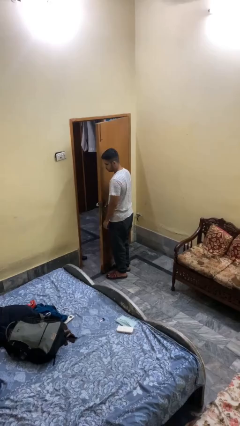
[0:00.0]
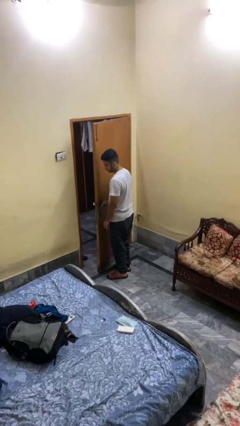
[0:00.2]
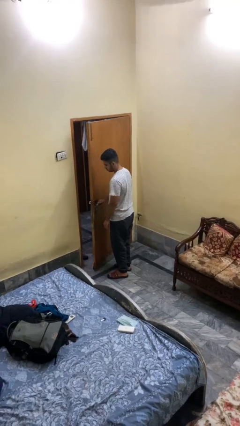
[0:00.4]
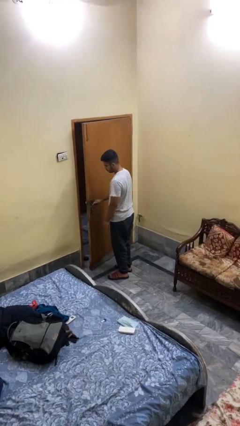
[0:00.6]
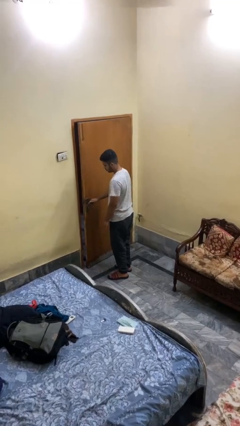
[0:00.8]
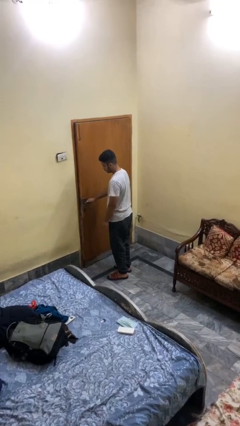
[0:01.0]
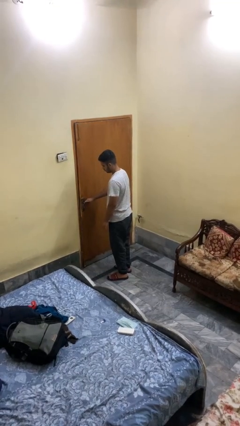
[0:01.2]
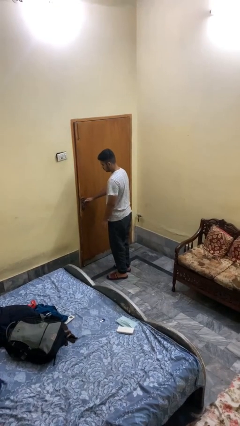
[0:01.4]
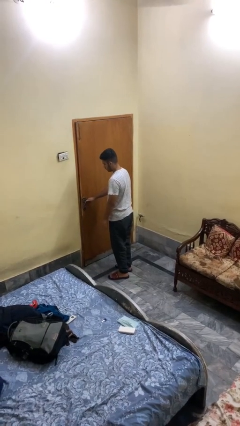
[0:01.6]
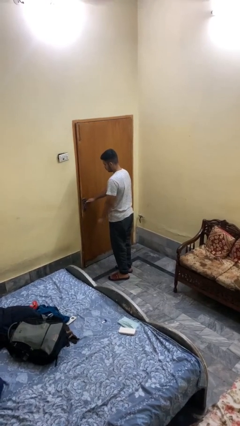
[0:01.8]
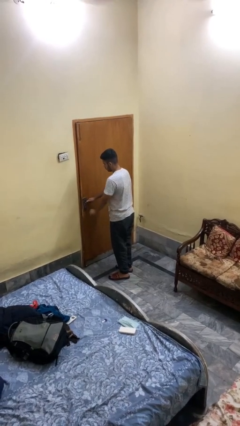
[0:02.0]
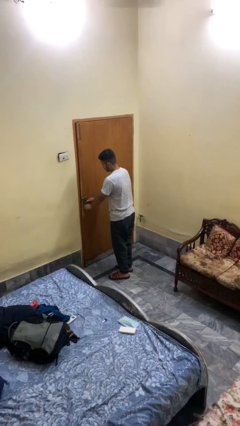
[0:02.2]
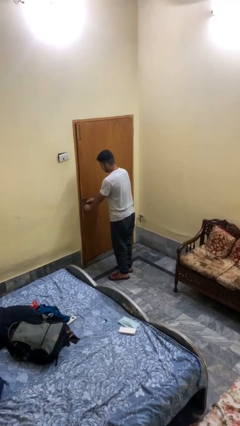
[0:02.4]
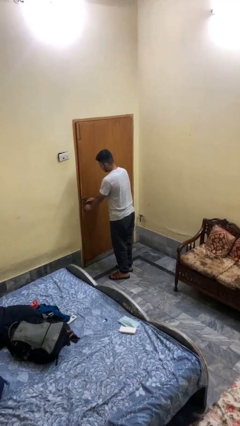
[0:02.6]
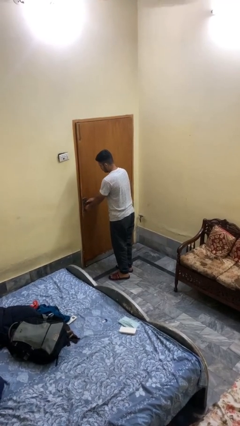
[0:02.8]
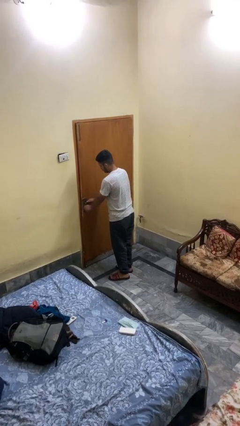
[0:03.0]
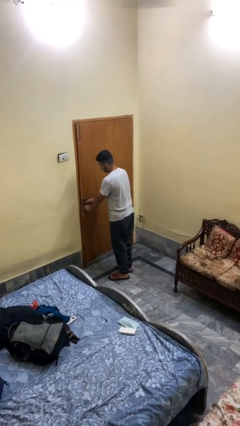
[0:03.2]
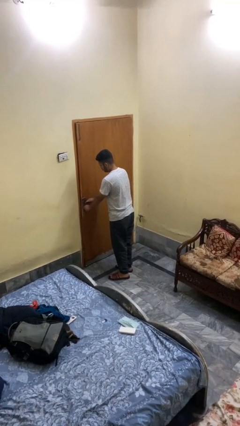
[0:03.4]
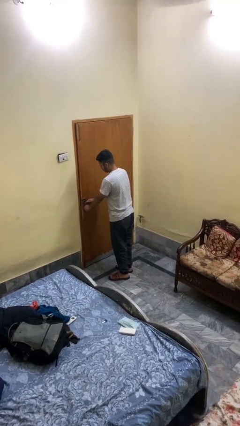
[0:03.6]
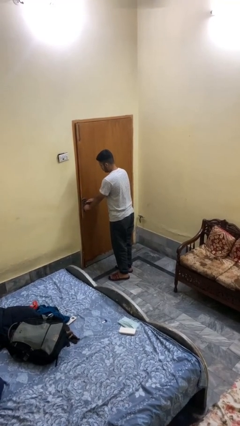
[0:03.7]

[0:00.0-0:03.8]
person closes facility door

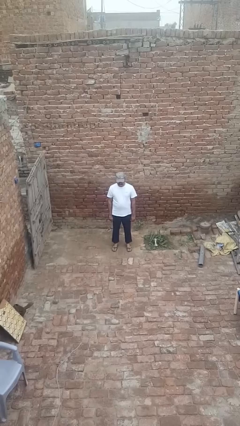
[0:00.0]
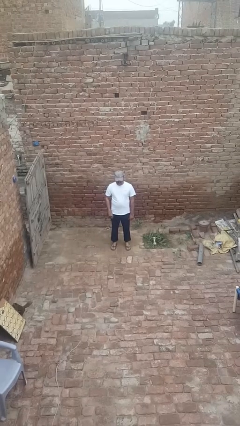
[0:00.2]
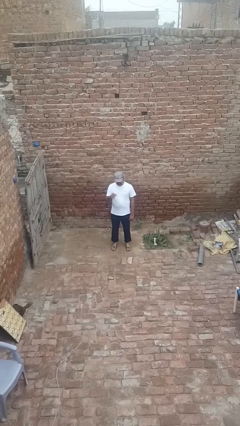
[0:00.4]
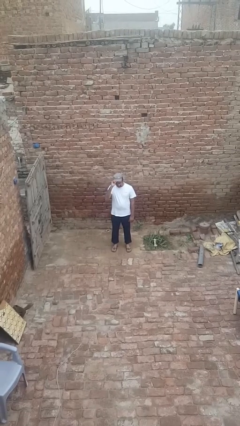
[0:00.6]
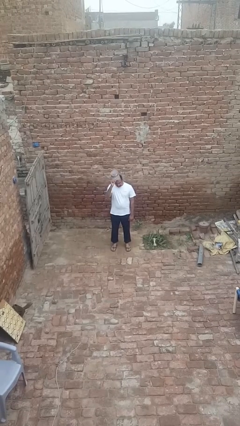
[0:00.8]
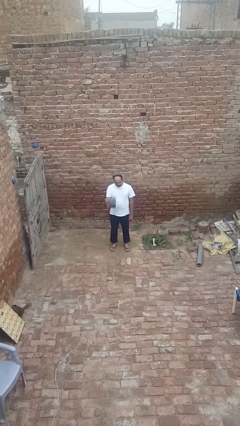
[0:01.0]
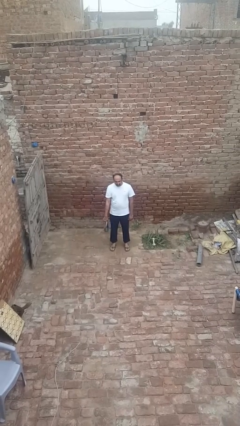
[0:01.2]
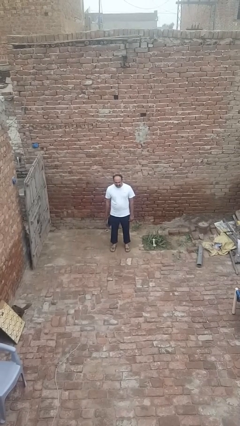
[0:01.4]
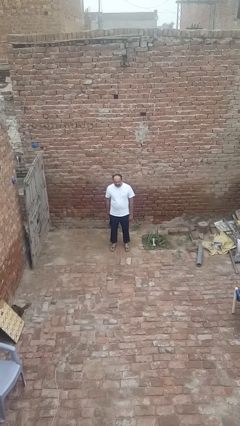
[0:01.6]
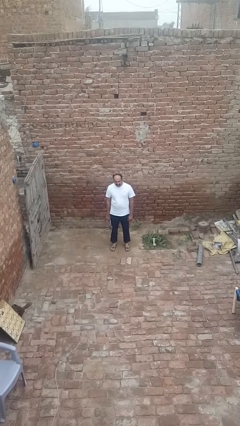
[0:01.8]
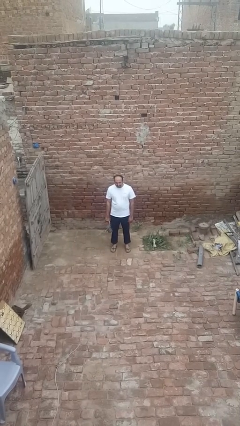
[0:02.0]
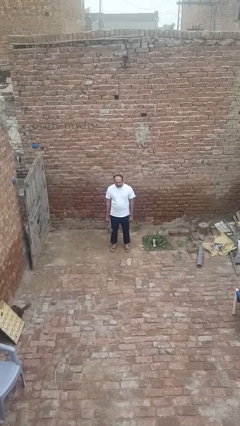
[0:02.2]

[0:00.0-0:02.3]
person takes off hat

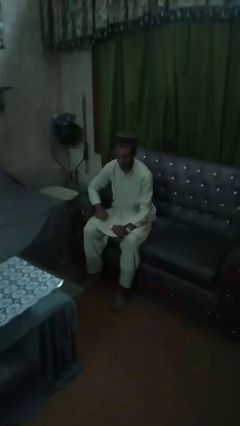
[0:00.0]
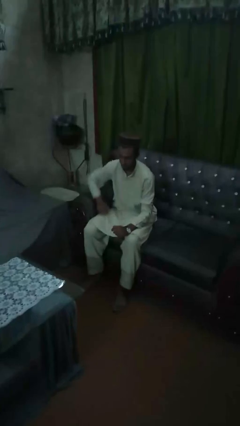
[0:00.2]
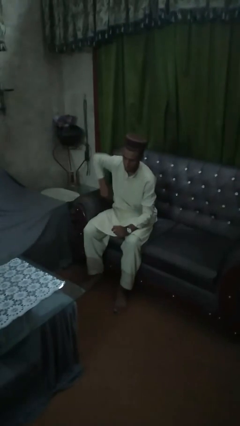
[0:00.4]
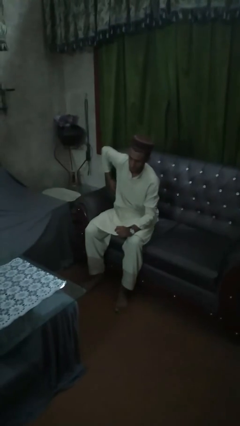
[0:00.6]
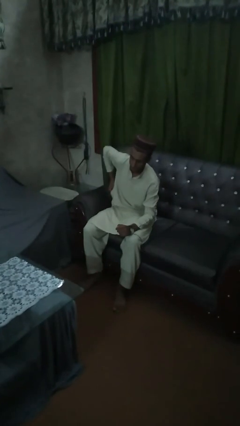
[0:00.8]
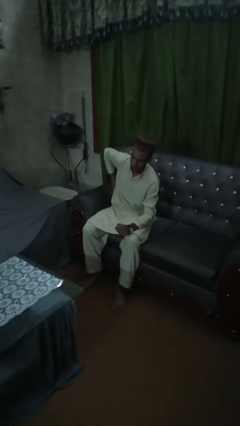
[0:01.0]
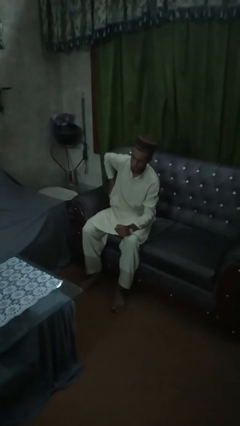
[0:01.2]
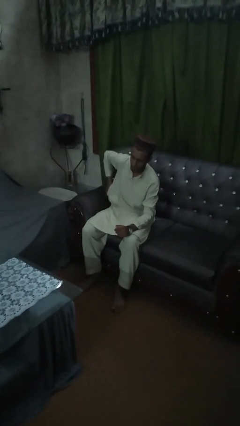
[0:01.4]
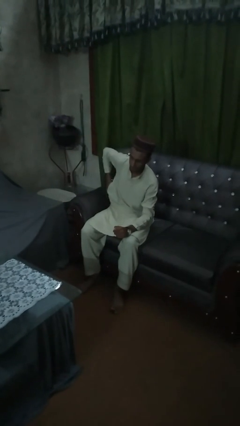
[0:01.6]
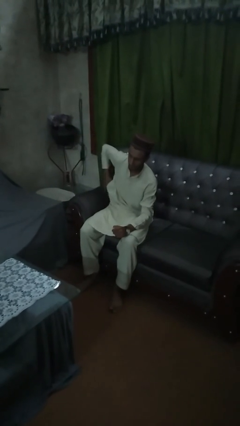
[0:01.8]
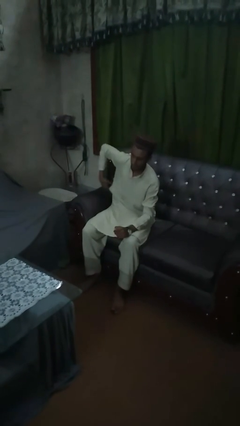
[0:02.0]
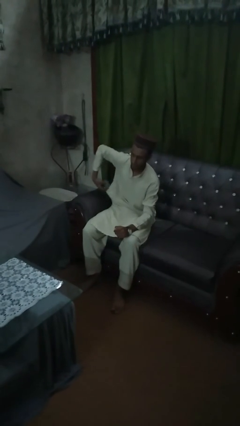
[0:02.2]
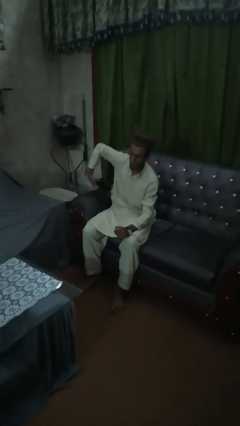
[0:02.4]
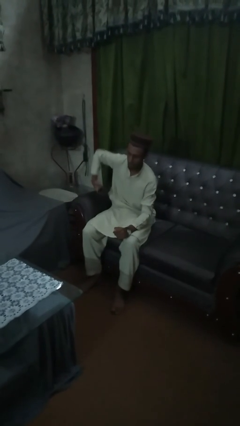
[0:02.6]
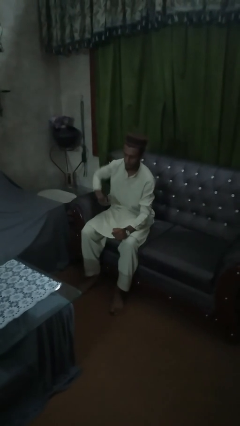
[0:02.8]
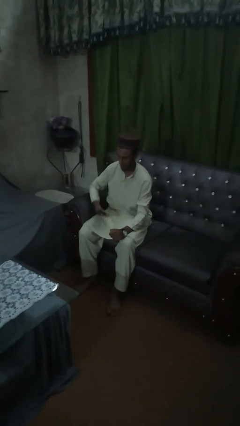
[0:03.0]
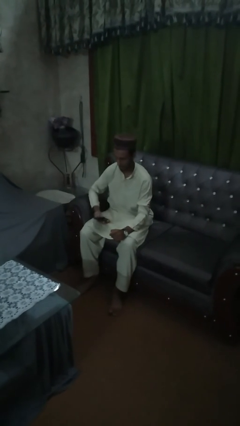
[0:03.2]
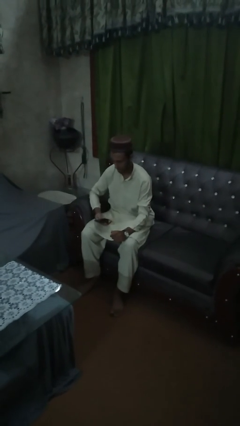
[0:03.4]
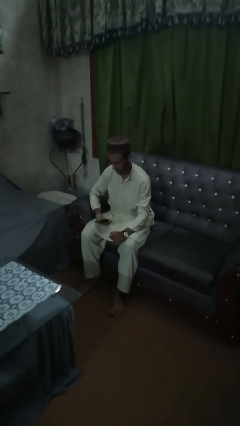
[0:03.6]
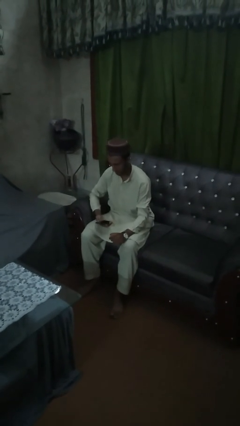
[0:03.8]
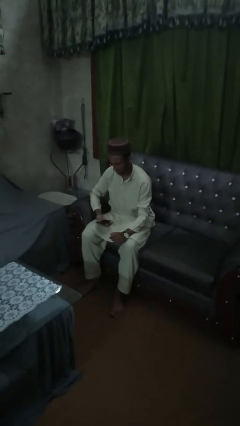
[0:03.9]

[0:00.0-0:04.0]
person takes phone from pocket

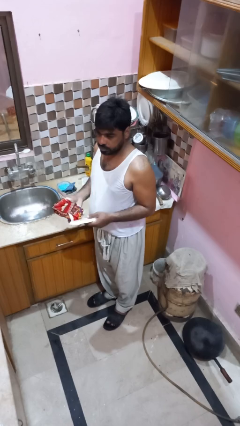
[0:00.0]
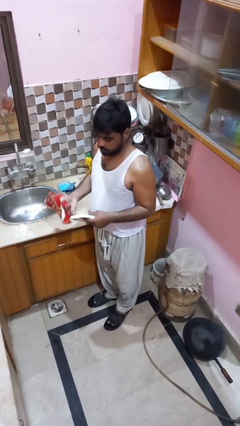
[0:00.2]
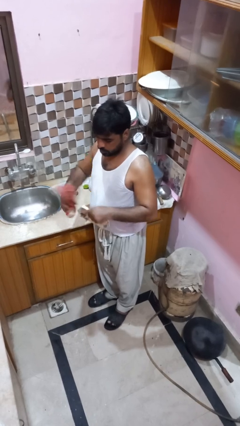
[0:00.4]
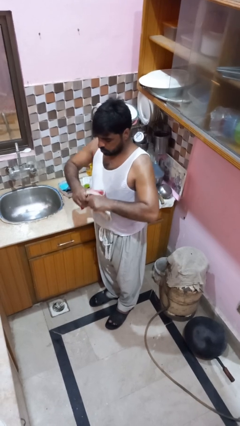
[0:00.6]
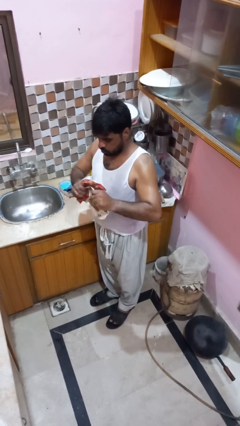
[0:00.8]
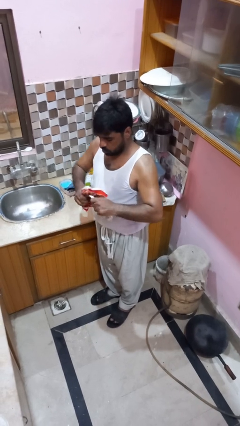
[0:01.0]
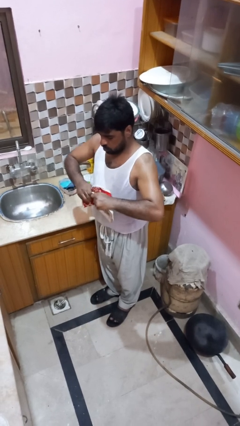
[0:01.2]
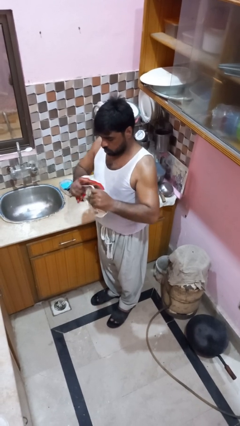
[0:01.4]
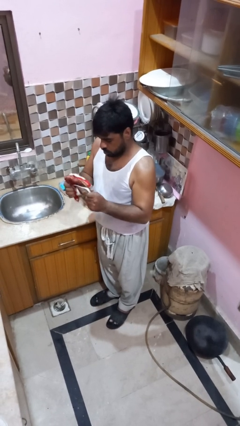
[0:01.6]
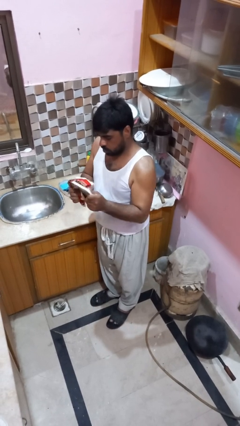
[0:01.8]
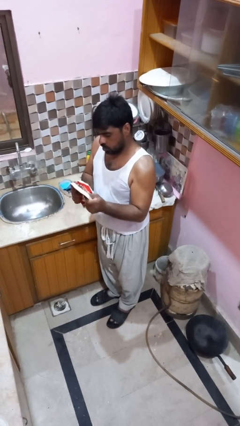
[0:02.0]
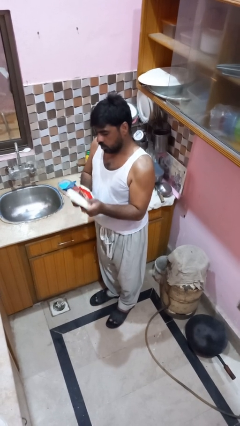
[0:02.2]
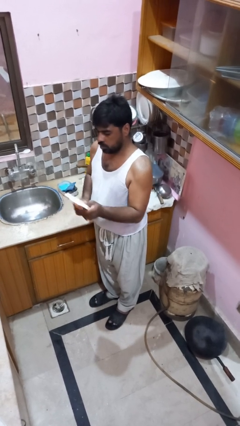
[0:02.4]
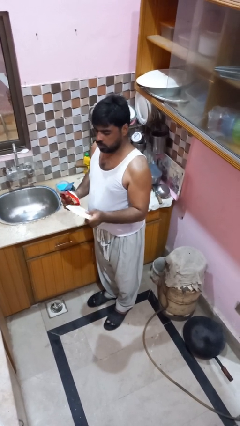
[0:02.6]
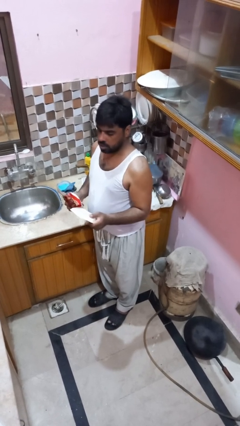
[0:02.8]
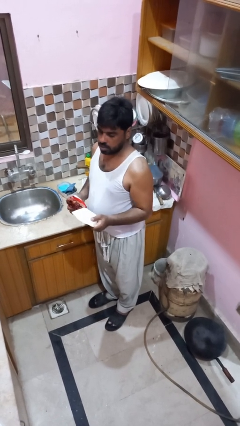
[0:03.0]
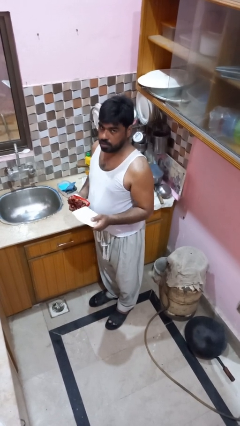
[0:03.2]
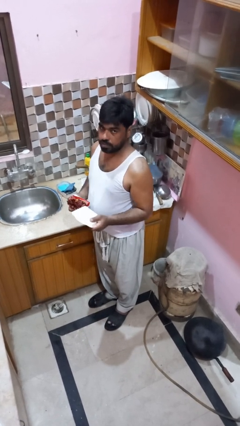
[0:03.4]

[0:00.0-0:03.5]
person dries dish

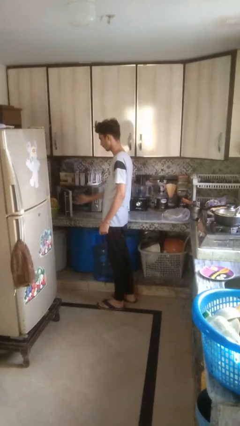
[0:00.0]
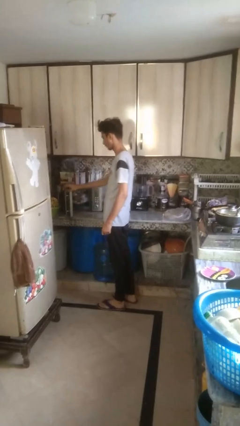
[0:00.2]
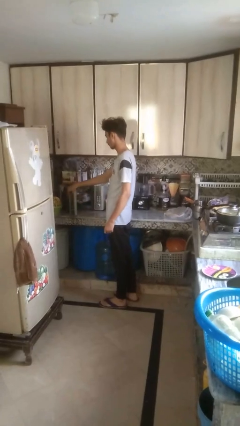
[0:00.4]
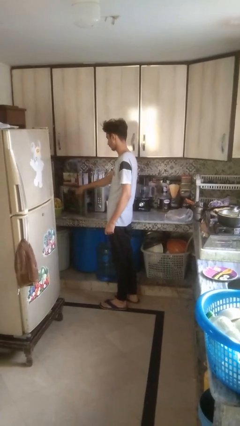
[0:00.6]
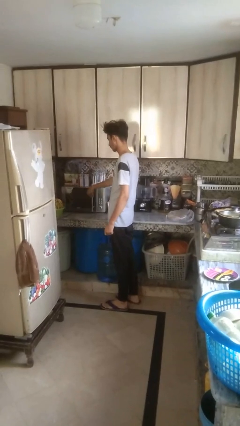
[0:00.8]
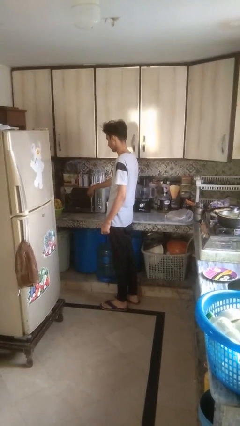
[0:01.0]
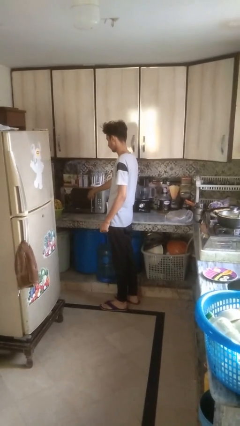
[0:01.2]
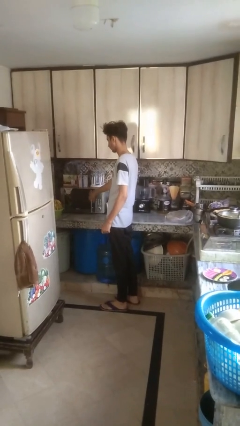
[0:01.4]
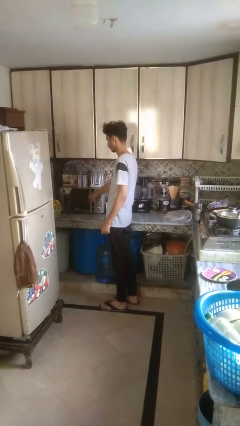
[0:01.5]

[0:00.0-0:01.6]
person closes oven door

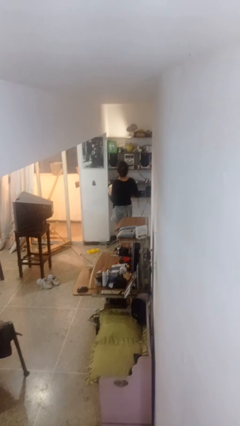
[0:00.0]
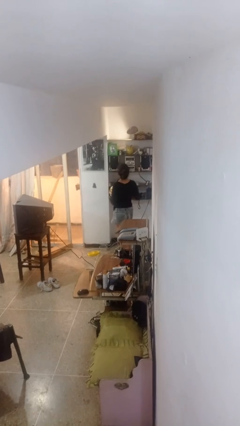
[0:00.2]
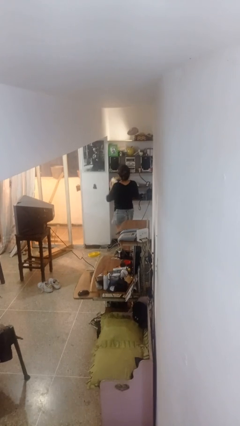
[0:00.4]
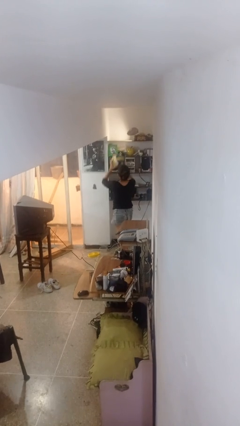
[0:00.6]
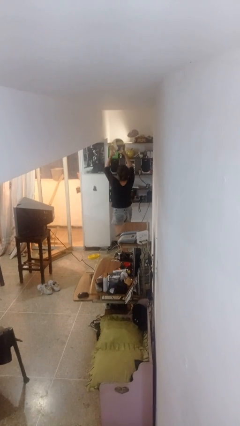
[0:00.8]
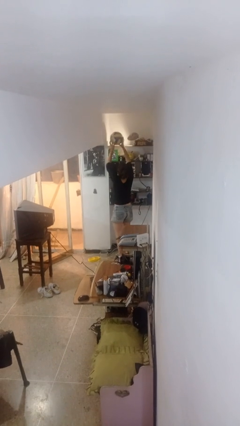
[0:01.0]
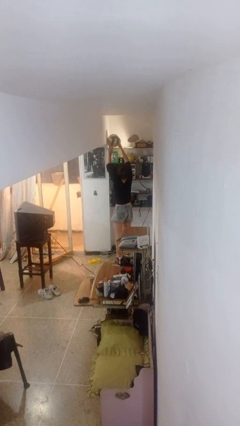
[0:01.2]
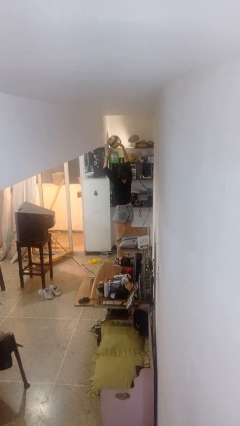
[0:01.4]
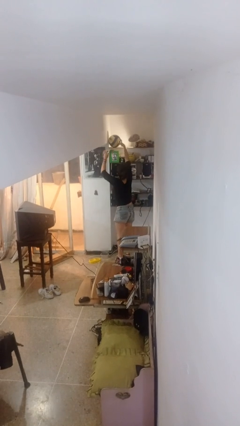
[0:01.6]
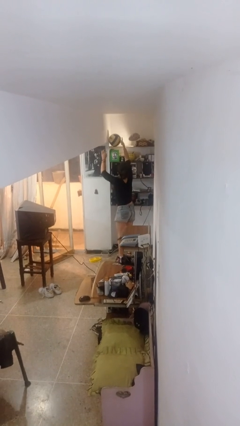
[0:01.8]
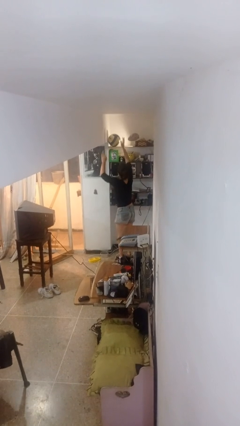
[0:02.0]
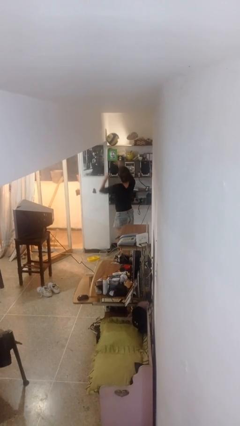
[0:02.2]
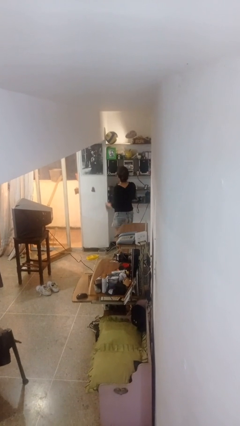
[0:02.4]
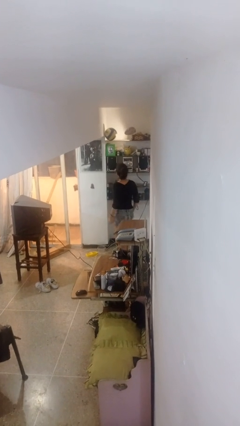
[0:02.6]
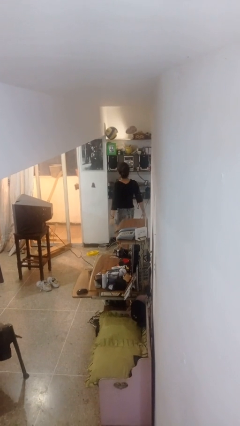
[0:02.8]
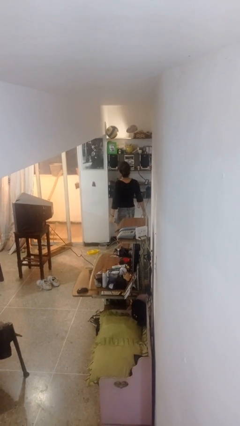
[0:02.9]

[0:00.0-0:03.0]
person puts down object on shelf
